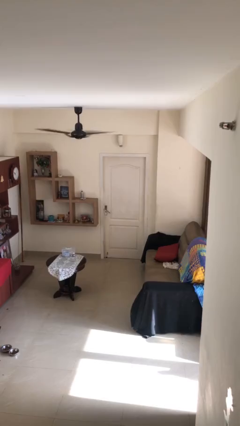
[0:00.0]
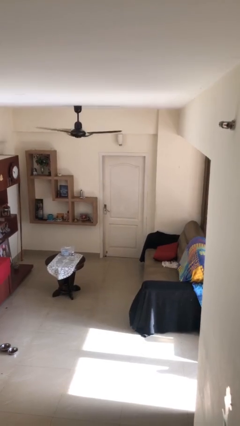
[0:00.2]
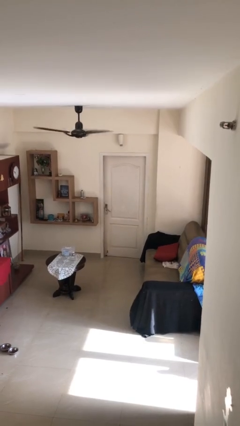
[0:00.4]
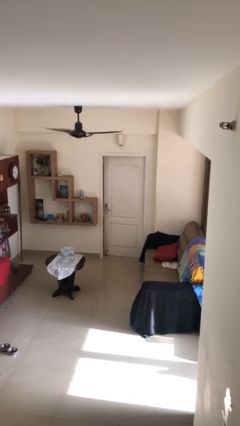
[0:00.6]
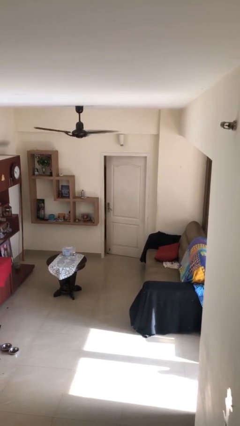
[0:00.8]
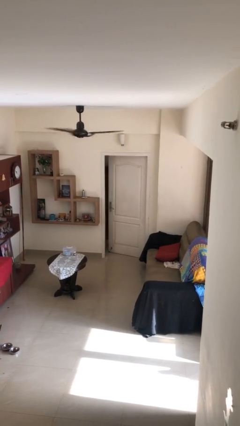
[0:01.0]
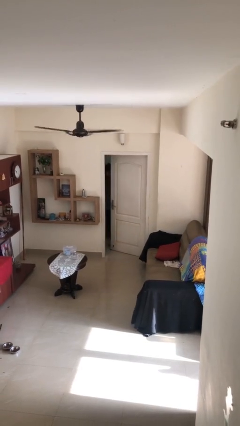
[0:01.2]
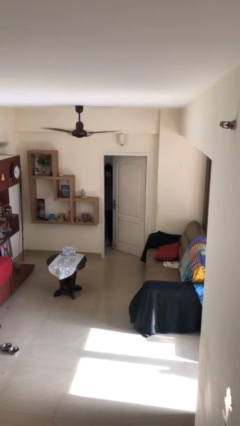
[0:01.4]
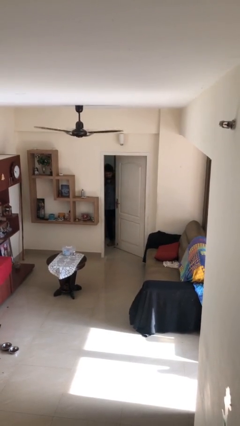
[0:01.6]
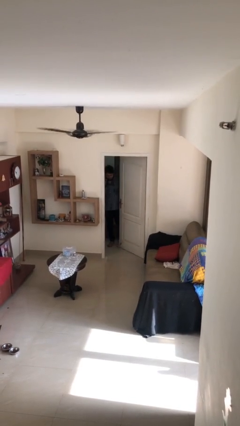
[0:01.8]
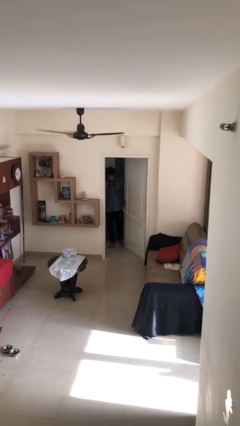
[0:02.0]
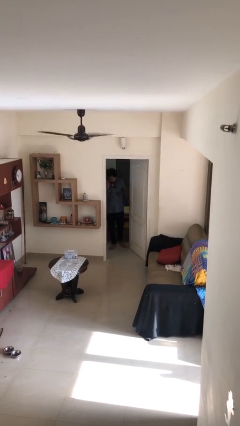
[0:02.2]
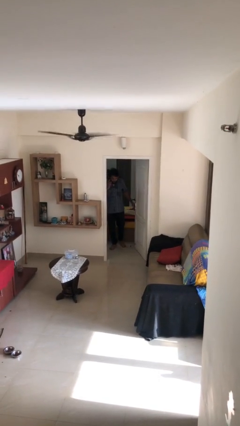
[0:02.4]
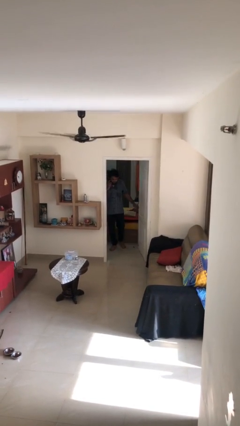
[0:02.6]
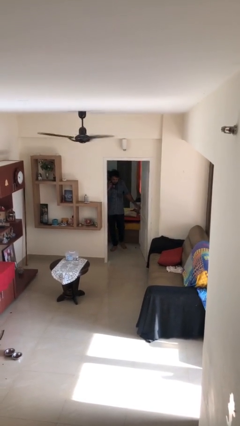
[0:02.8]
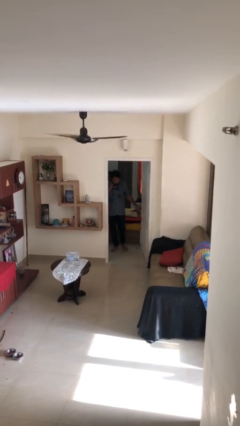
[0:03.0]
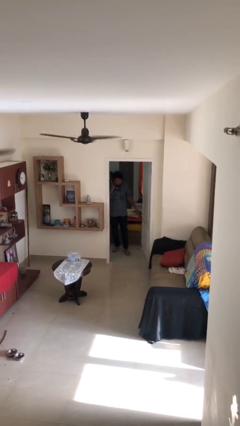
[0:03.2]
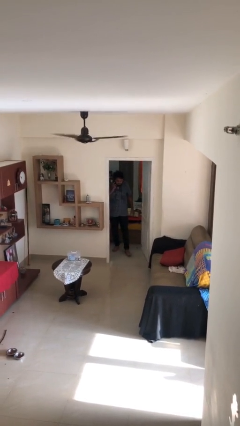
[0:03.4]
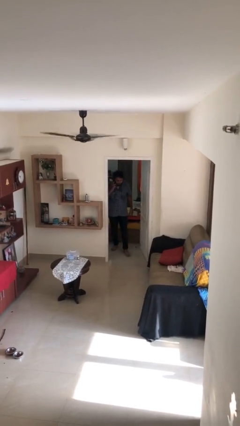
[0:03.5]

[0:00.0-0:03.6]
person opens facility door

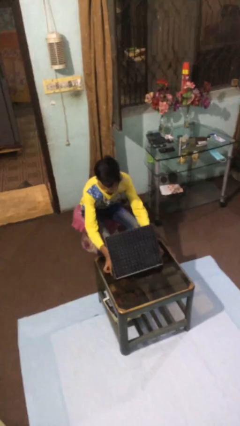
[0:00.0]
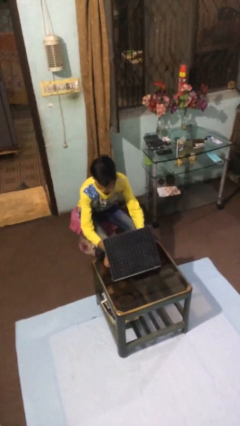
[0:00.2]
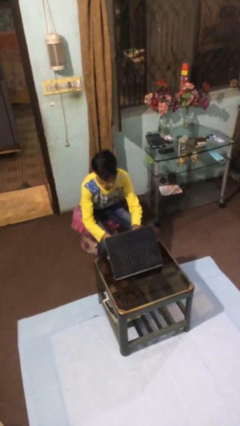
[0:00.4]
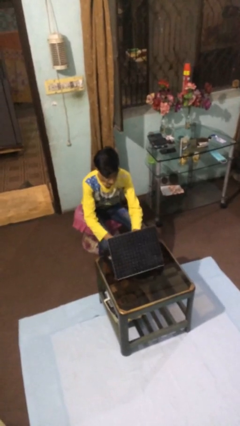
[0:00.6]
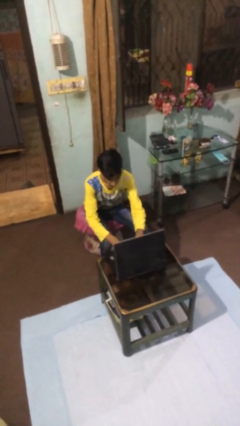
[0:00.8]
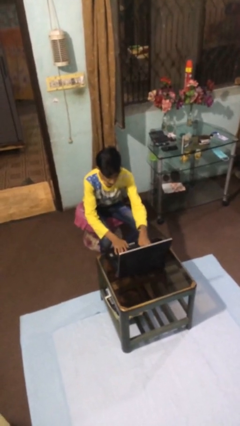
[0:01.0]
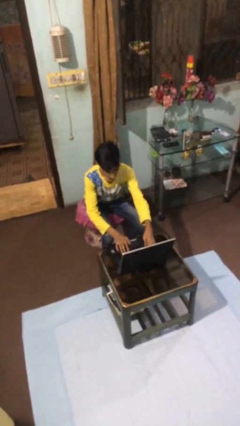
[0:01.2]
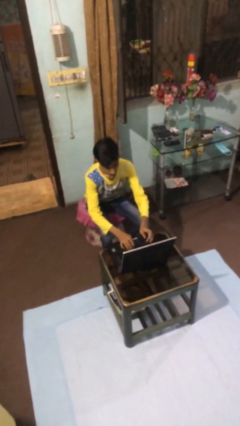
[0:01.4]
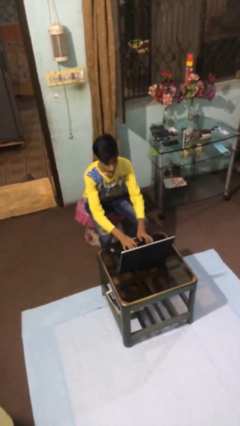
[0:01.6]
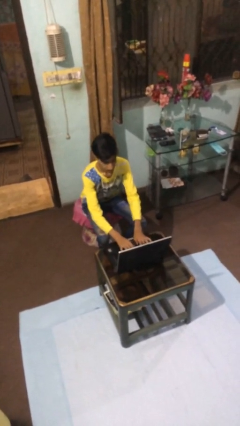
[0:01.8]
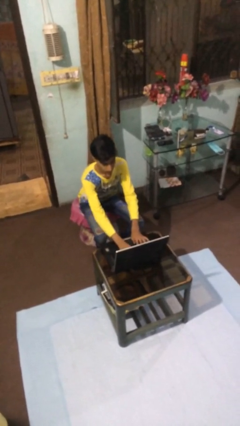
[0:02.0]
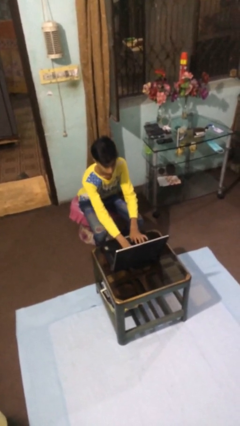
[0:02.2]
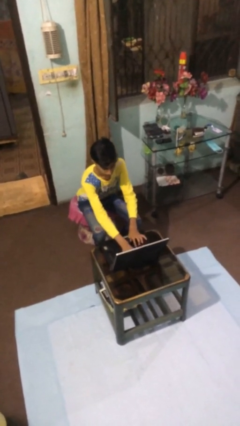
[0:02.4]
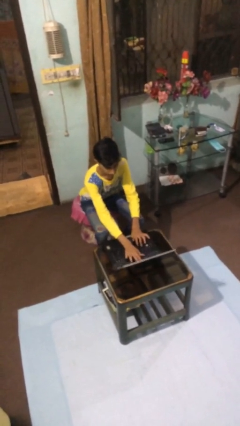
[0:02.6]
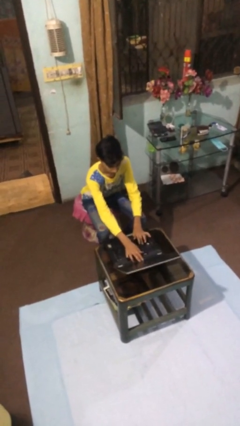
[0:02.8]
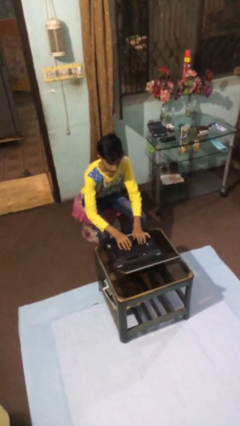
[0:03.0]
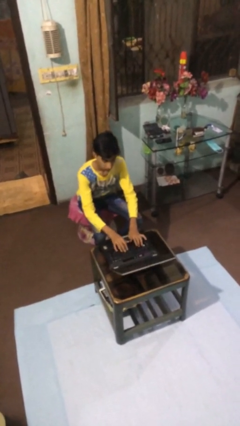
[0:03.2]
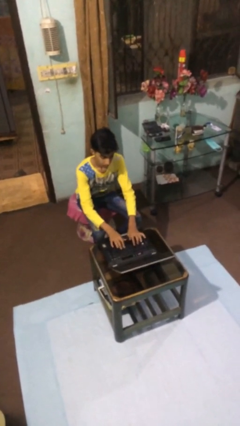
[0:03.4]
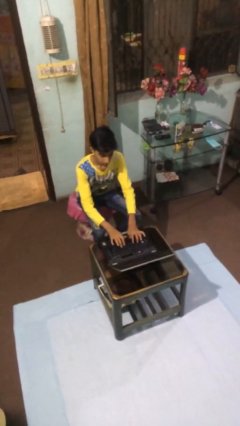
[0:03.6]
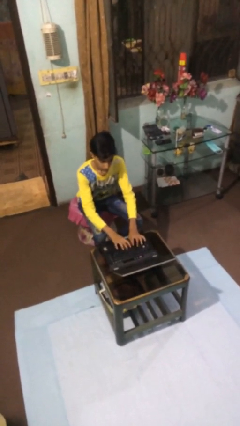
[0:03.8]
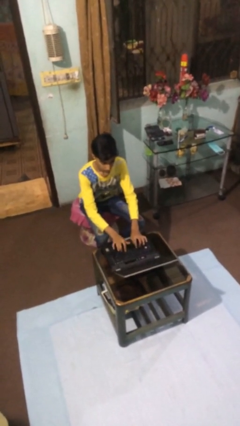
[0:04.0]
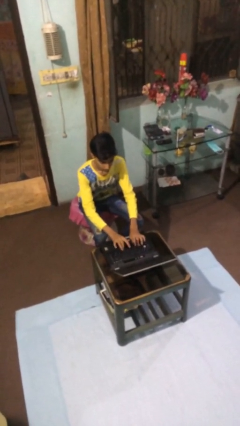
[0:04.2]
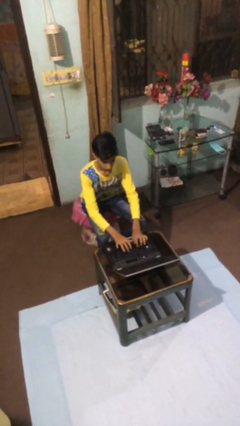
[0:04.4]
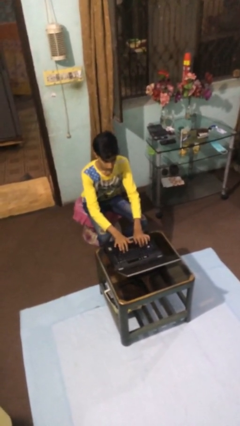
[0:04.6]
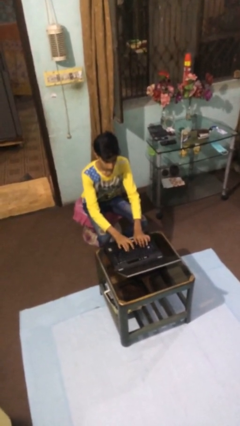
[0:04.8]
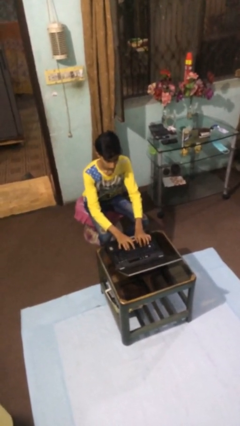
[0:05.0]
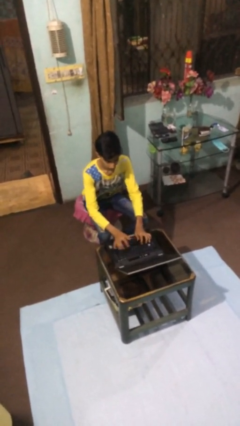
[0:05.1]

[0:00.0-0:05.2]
person interacts with laptop

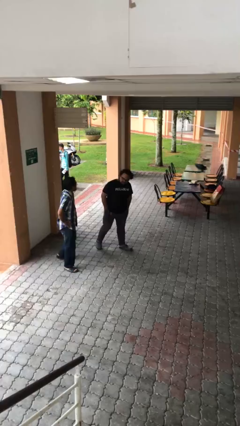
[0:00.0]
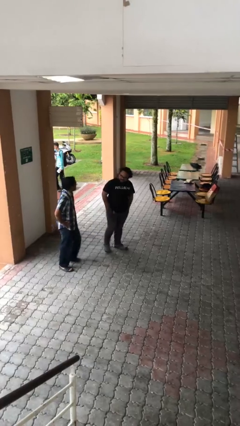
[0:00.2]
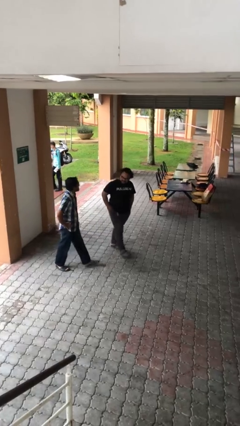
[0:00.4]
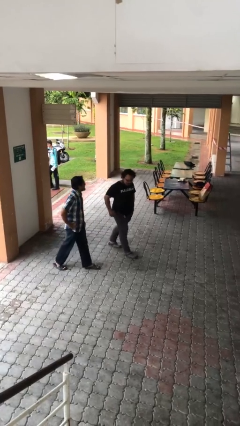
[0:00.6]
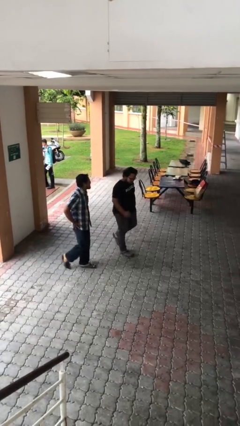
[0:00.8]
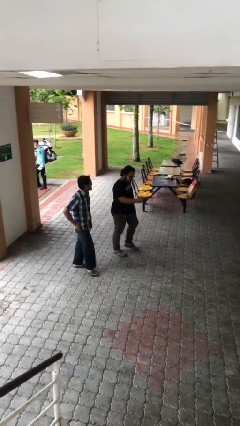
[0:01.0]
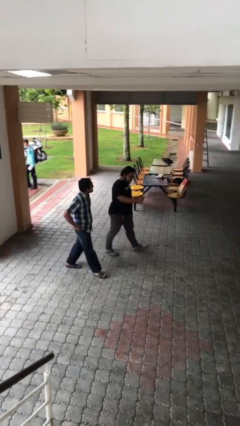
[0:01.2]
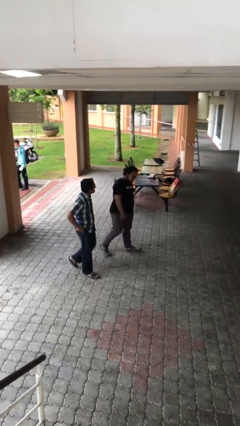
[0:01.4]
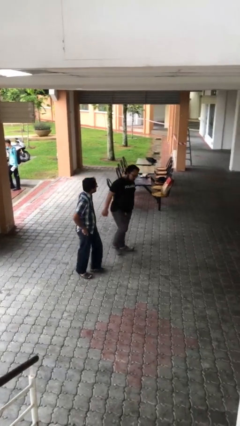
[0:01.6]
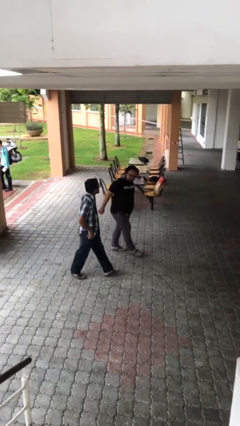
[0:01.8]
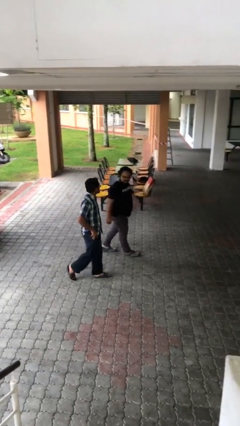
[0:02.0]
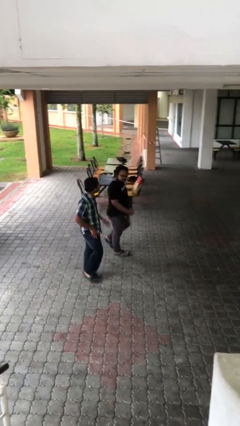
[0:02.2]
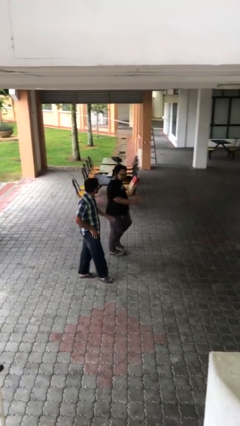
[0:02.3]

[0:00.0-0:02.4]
person talks to person

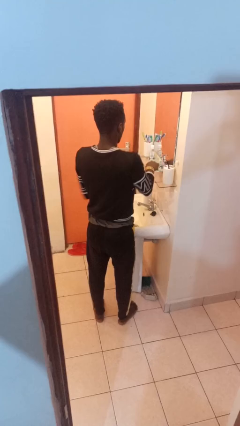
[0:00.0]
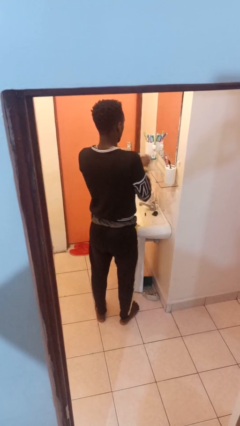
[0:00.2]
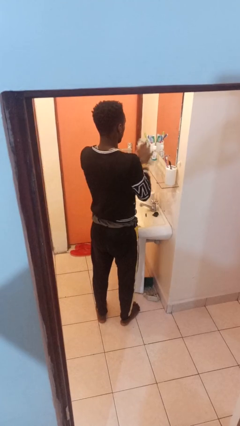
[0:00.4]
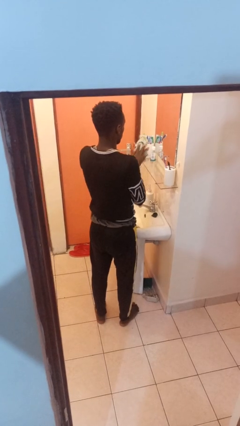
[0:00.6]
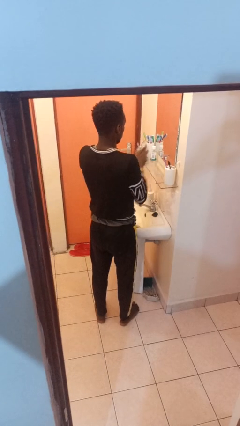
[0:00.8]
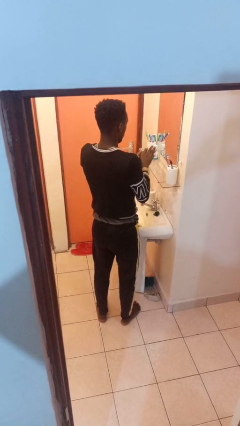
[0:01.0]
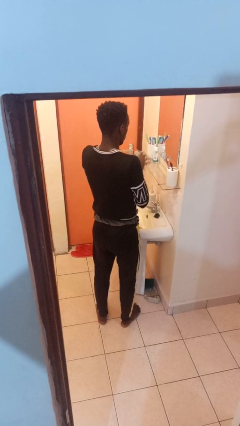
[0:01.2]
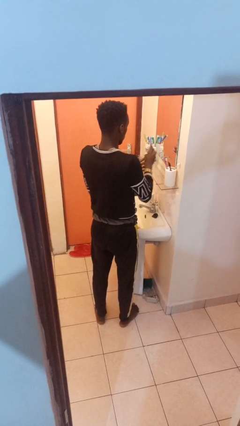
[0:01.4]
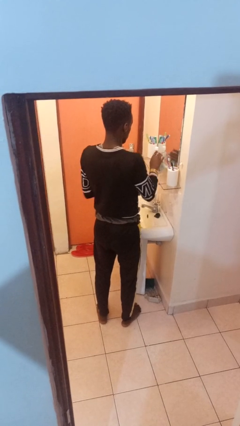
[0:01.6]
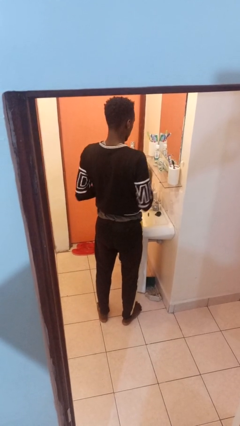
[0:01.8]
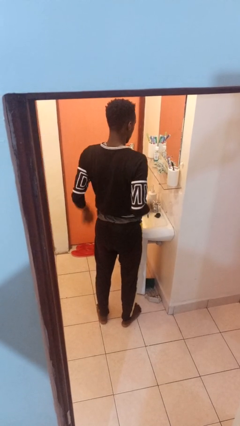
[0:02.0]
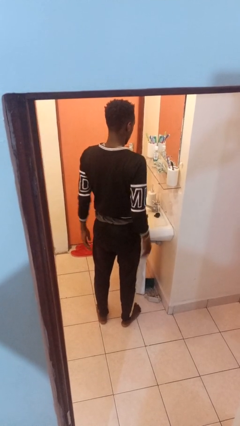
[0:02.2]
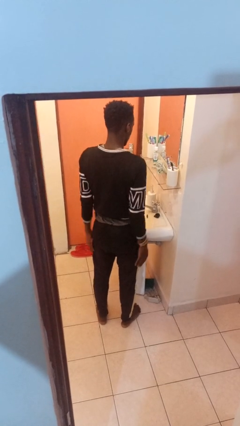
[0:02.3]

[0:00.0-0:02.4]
person dries hands with towel

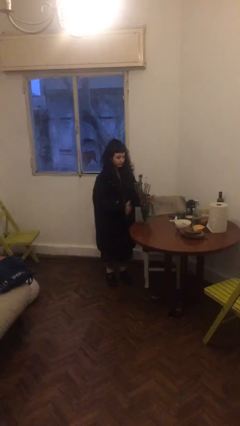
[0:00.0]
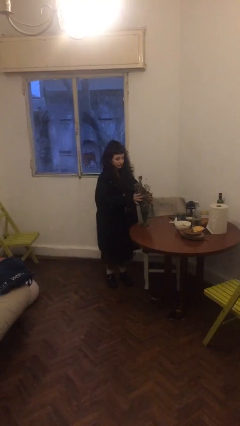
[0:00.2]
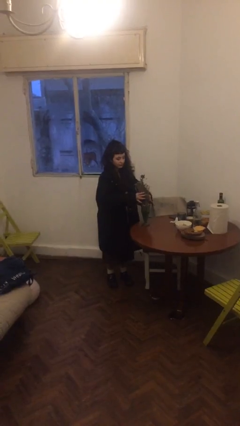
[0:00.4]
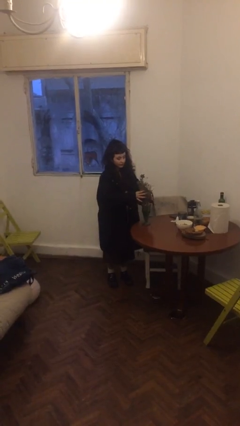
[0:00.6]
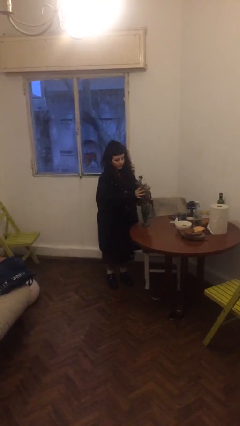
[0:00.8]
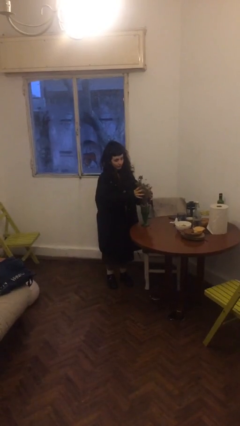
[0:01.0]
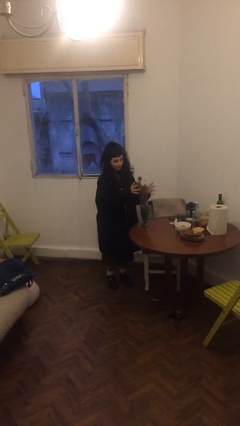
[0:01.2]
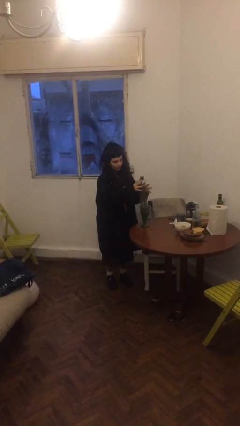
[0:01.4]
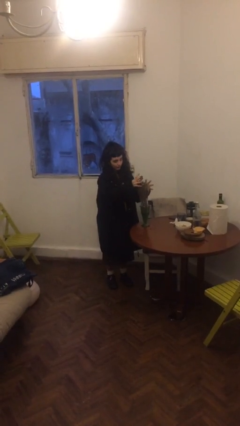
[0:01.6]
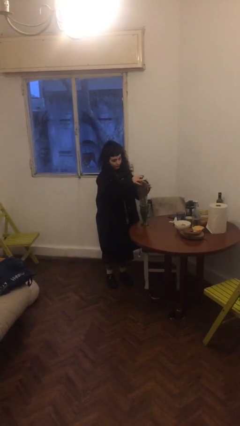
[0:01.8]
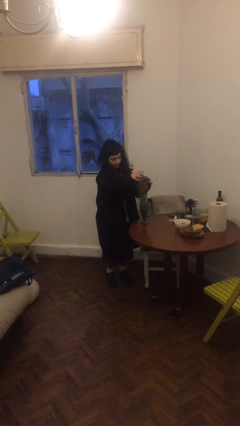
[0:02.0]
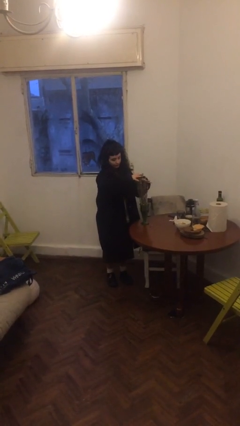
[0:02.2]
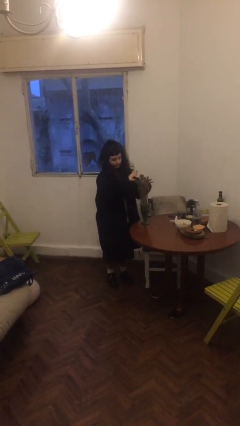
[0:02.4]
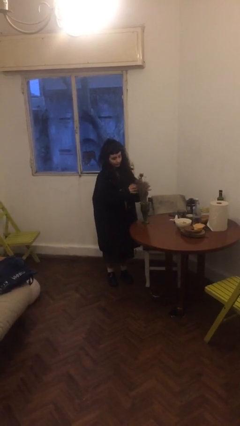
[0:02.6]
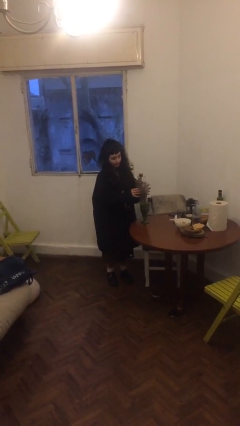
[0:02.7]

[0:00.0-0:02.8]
person arranges flowers in vase

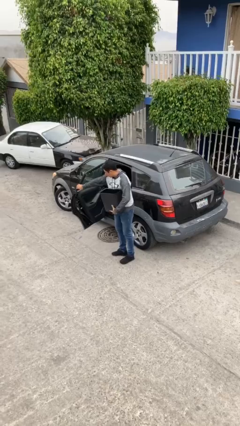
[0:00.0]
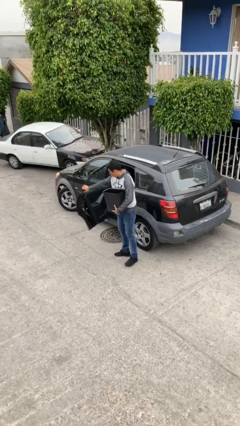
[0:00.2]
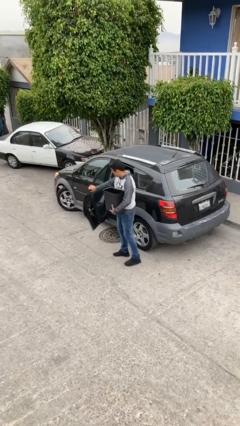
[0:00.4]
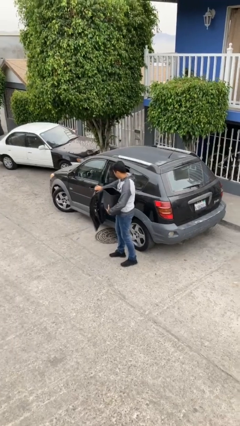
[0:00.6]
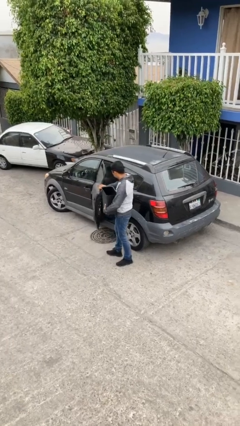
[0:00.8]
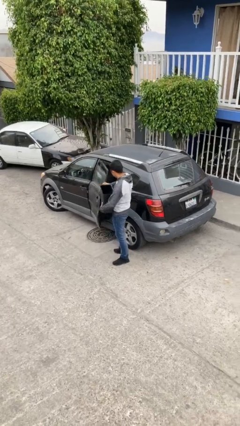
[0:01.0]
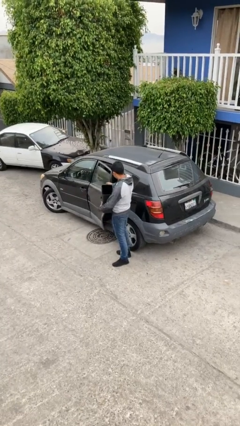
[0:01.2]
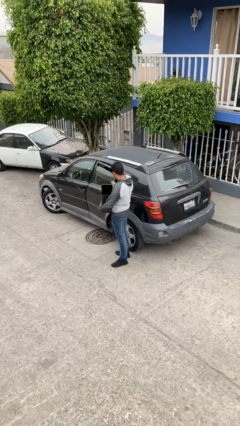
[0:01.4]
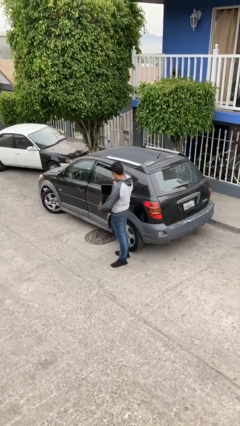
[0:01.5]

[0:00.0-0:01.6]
person closes car door
